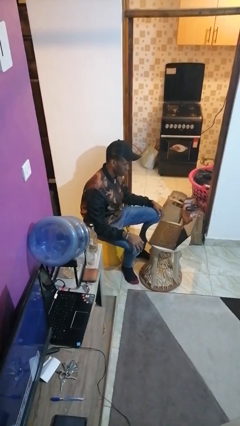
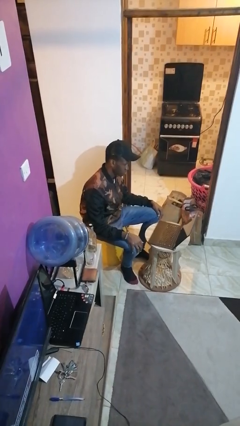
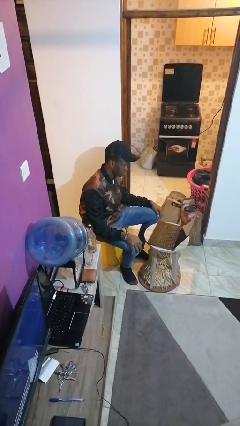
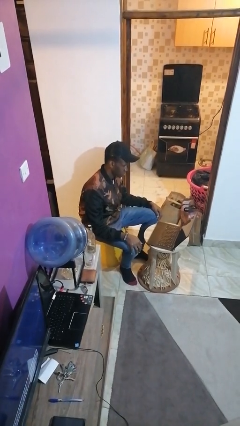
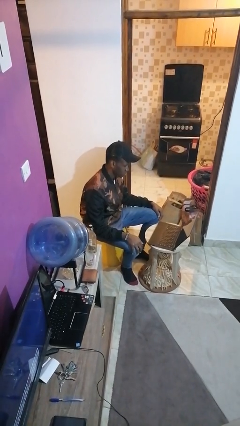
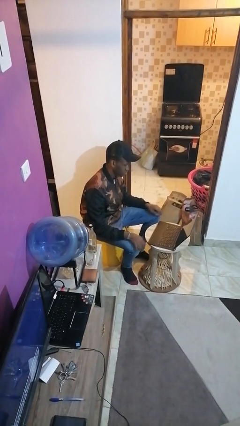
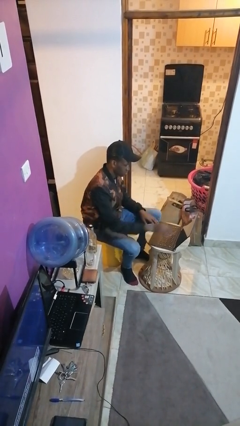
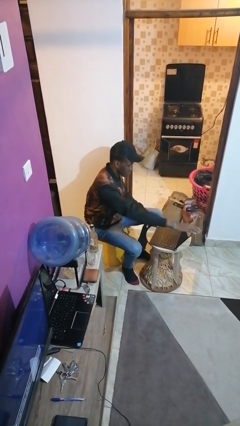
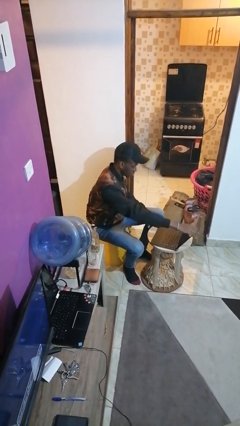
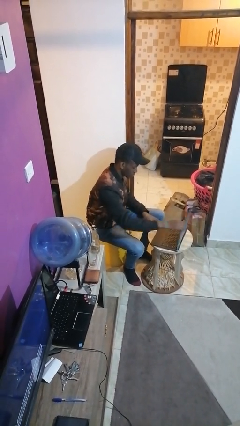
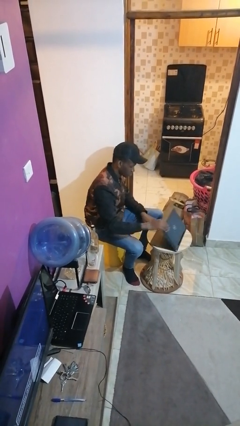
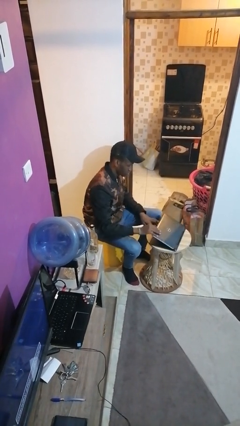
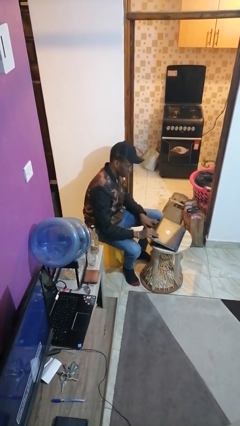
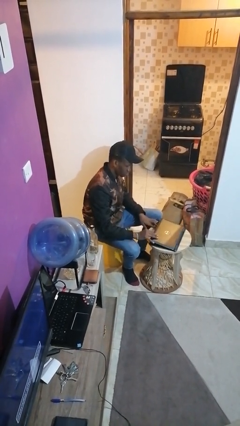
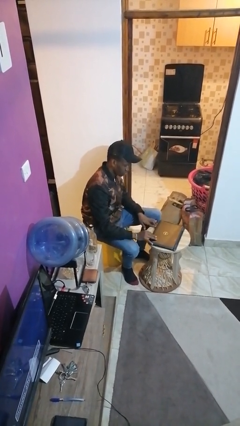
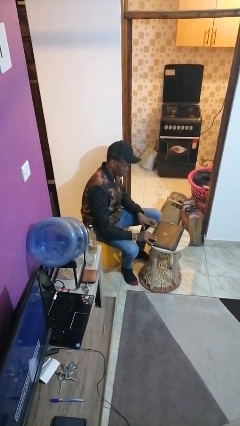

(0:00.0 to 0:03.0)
person closes laptop

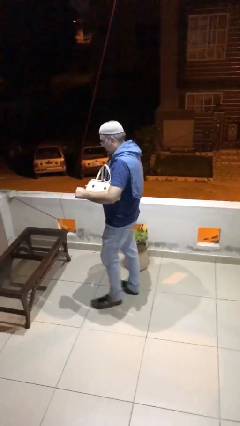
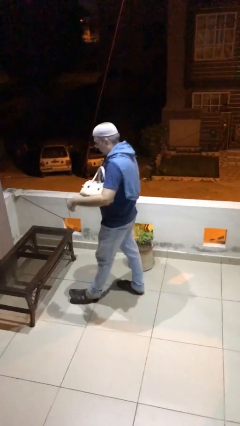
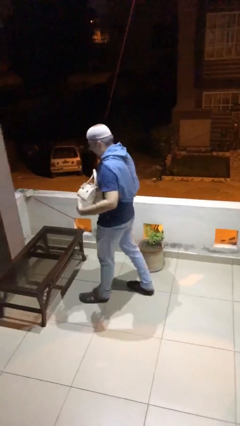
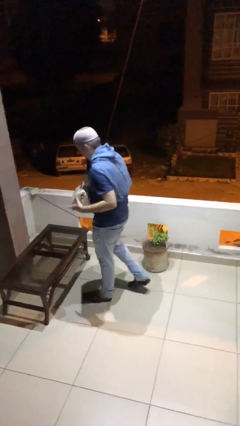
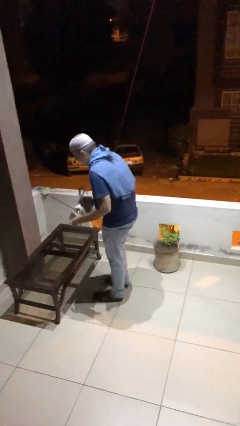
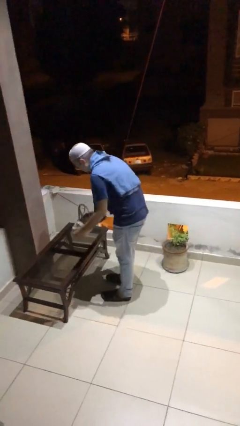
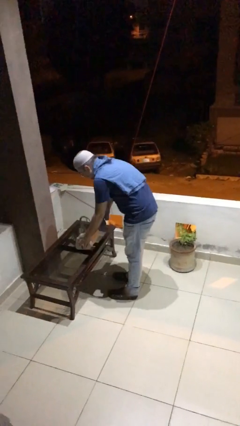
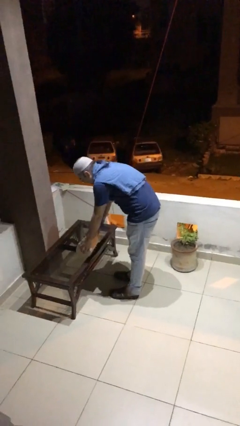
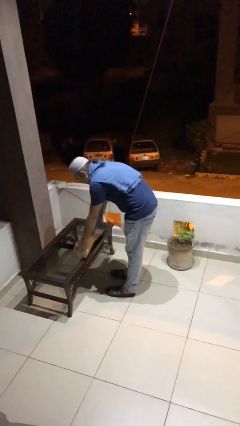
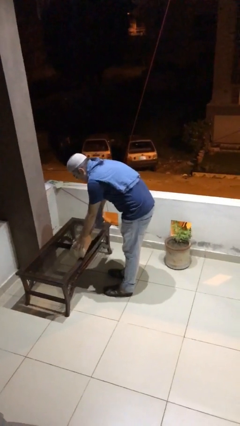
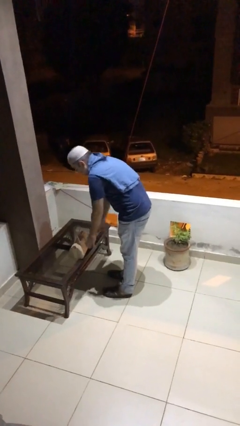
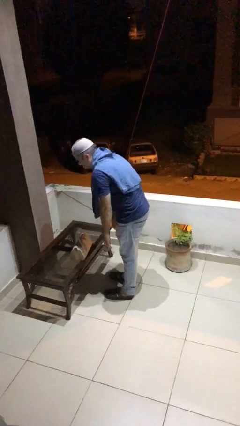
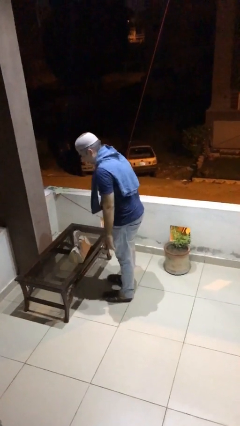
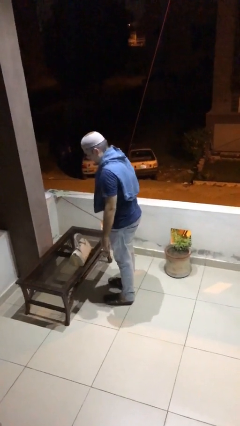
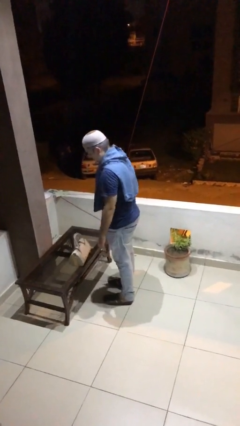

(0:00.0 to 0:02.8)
person puts down object on table

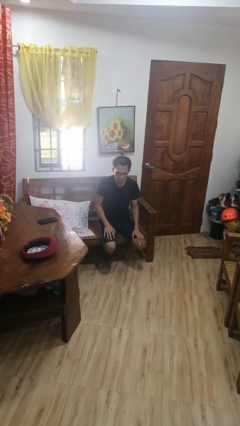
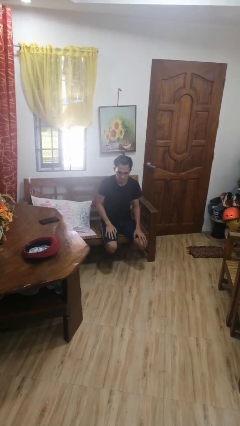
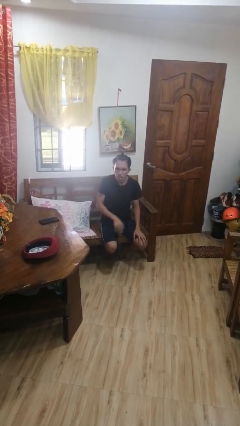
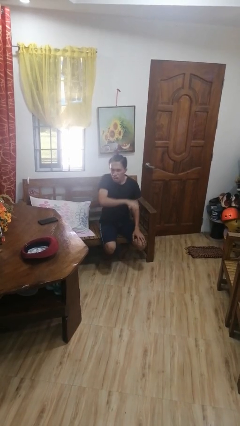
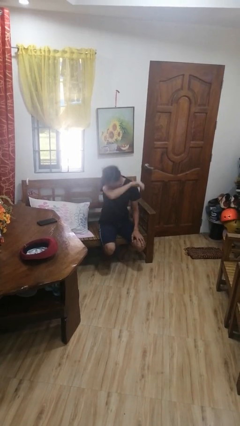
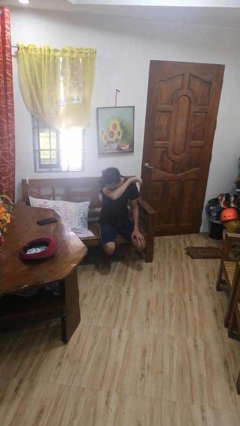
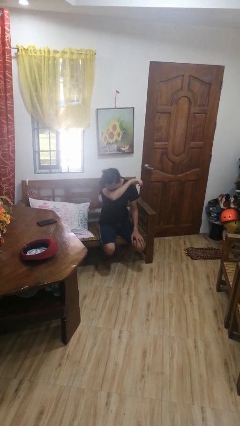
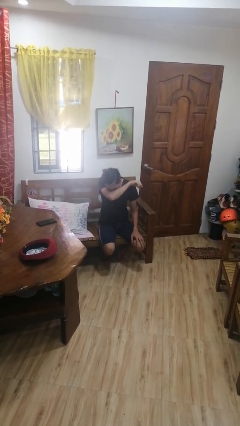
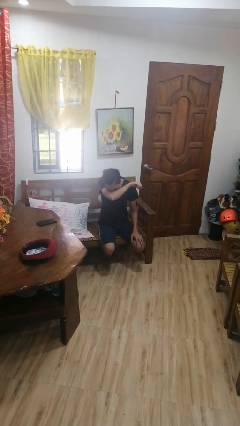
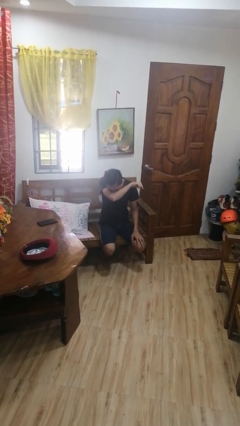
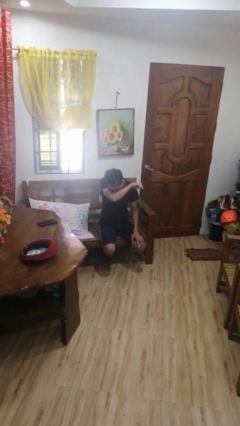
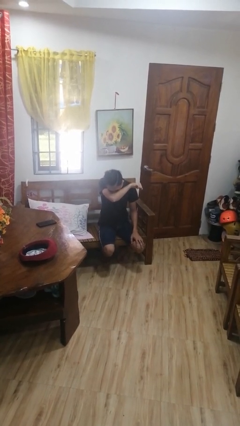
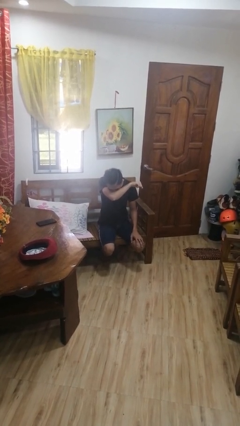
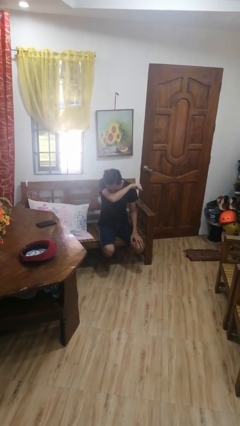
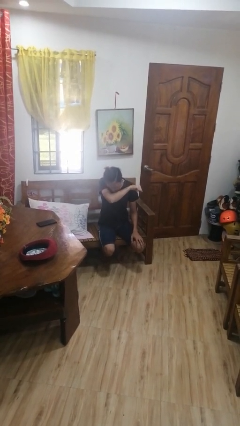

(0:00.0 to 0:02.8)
person sneezes into arm

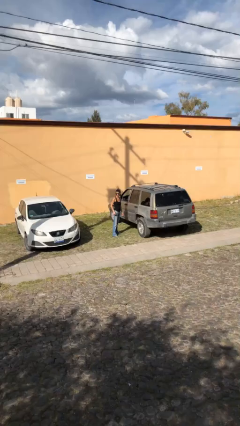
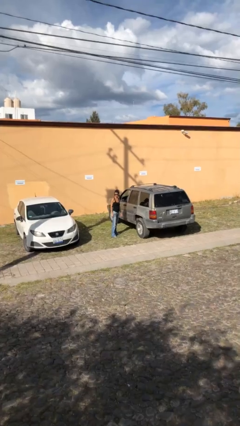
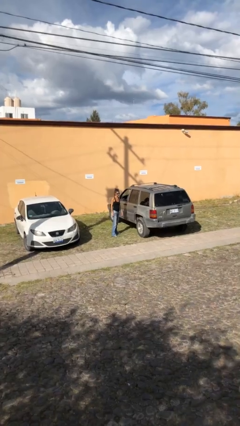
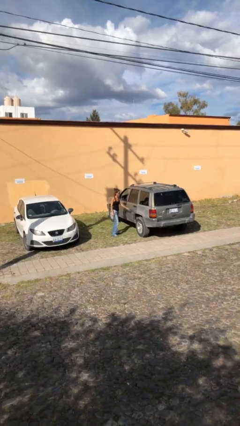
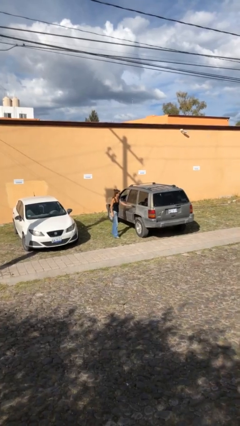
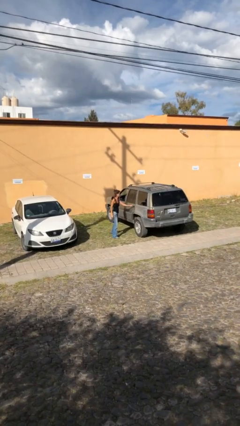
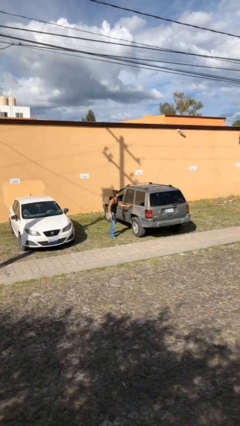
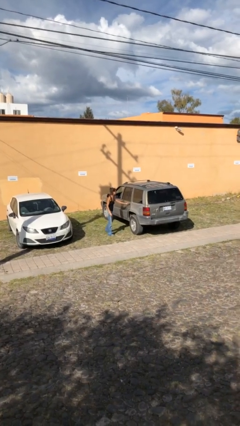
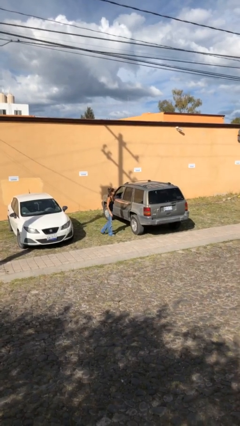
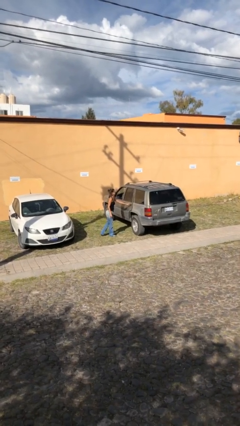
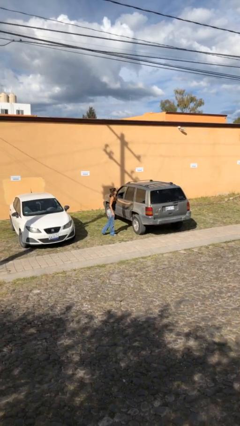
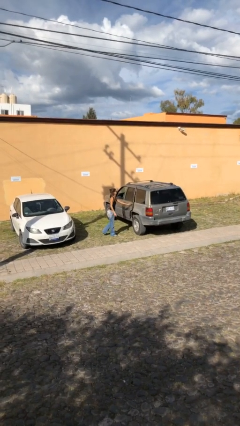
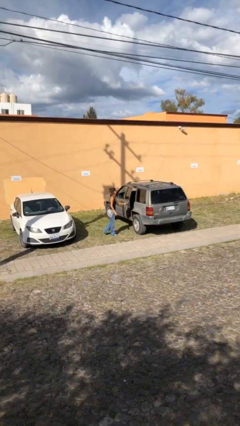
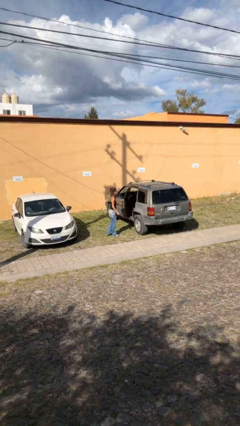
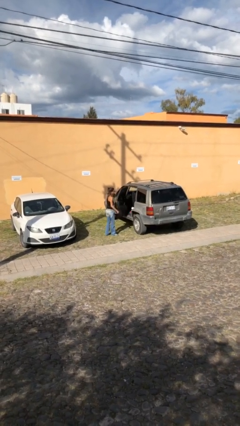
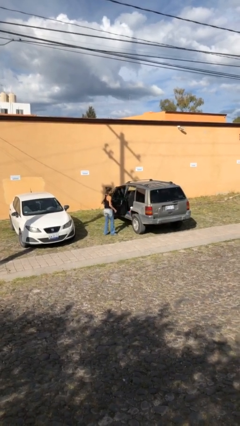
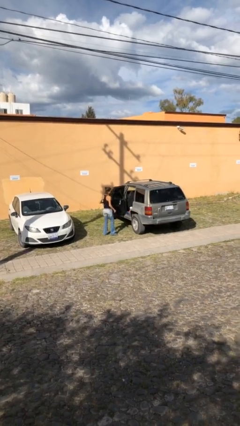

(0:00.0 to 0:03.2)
person opens car door

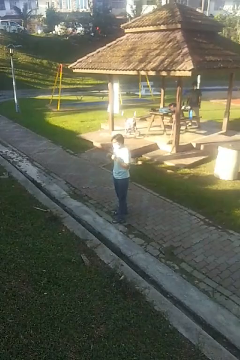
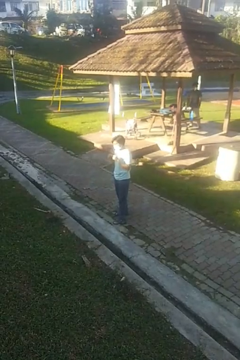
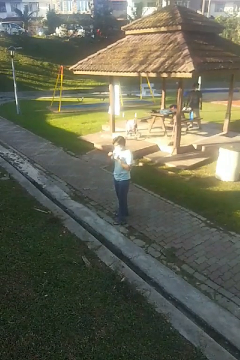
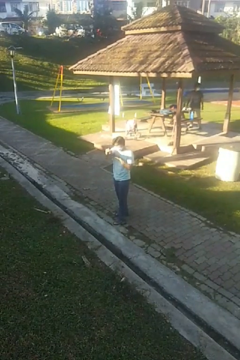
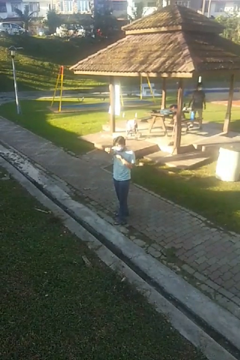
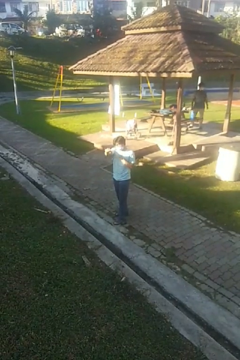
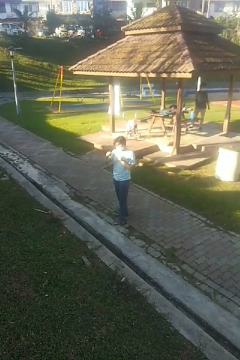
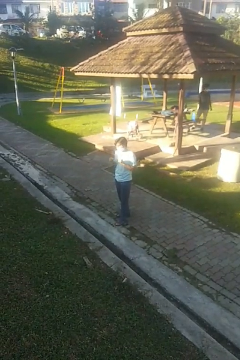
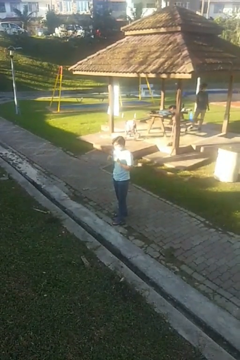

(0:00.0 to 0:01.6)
person punches

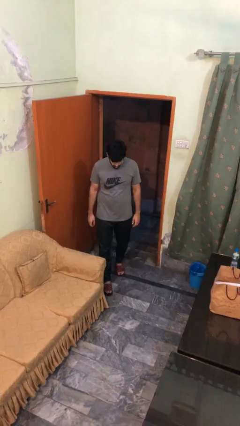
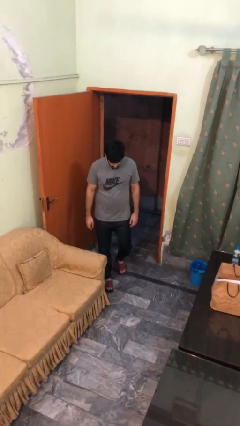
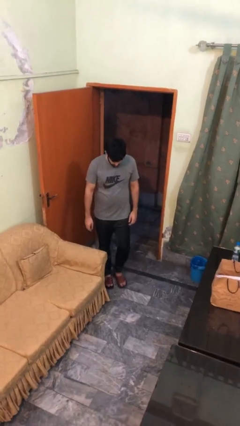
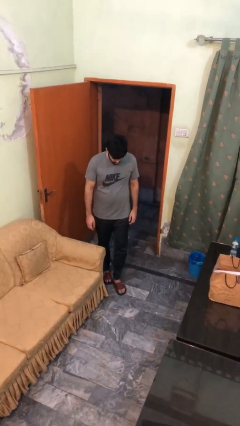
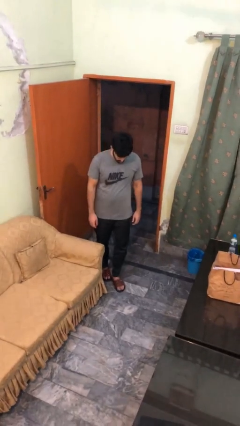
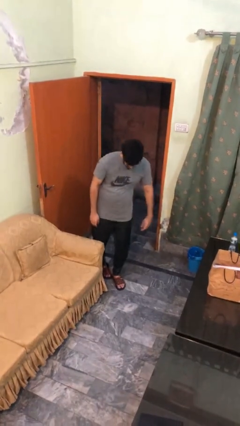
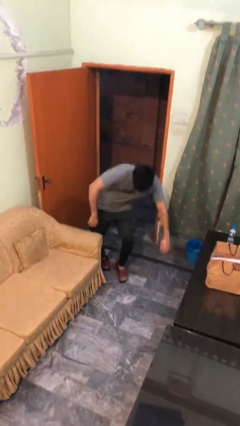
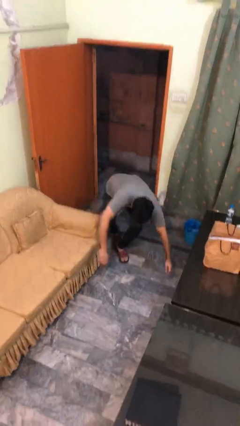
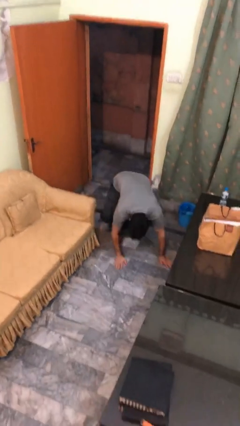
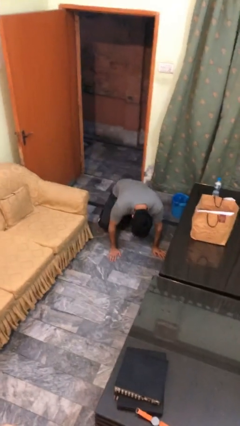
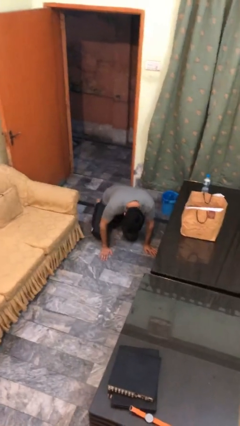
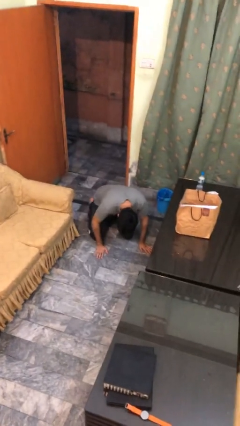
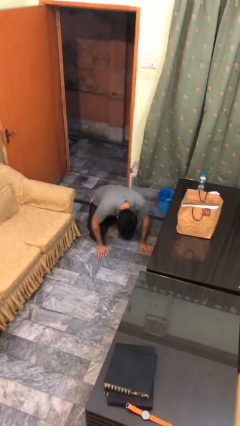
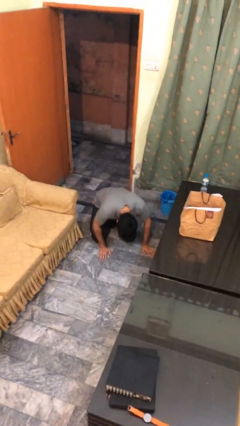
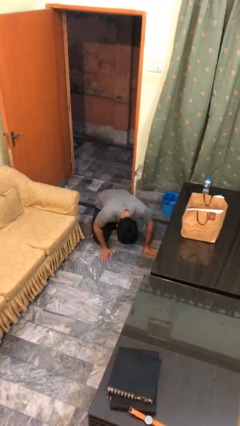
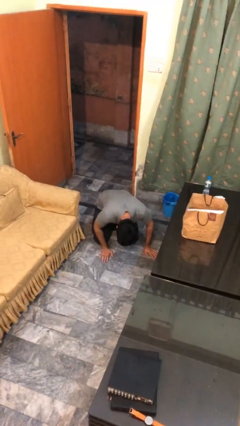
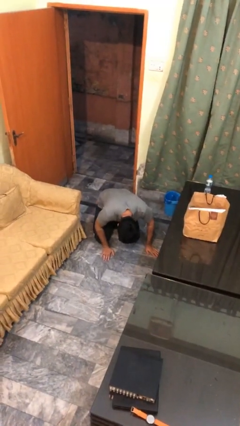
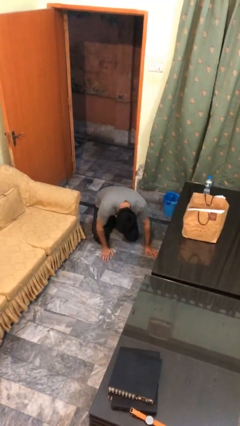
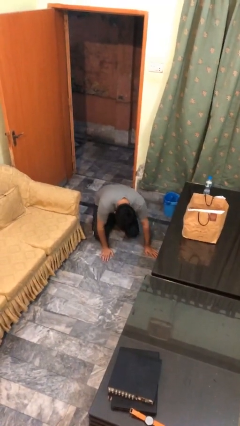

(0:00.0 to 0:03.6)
person trips on object on floor

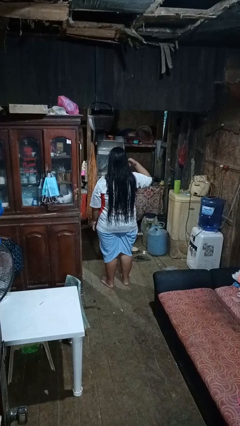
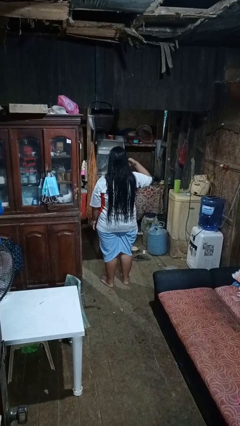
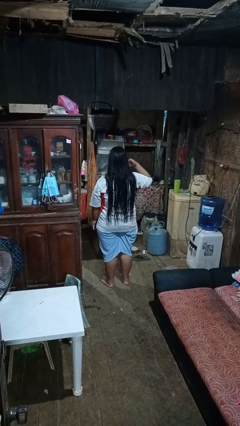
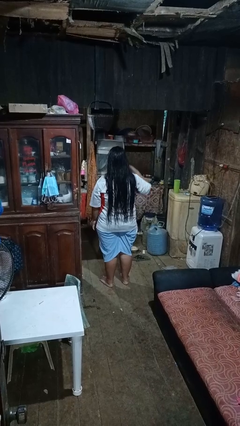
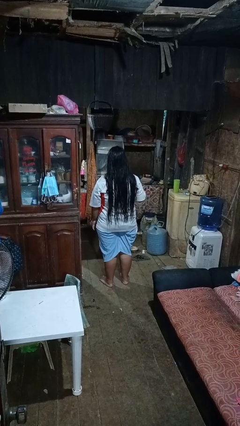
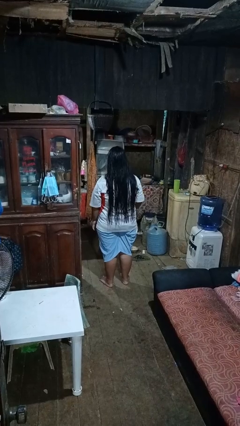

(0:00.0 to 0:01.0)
person gestures call me
